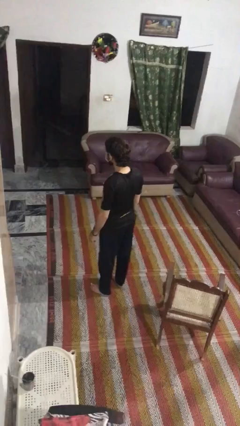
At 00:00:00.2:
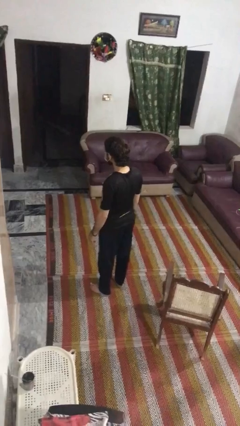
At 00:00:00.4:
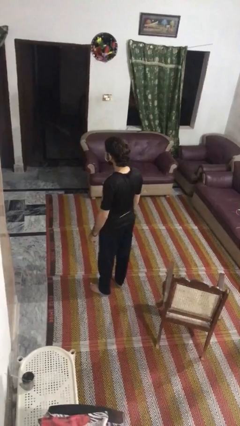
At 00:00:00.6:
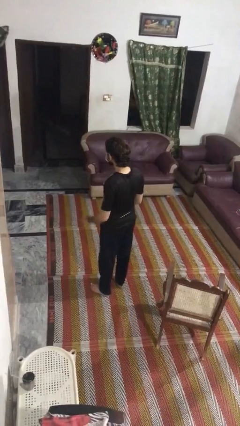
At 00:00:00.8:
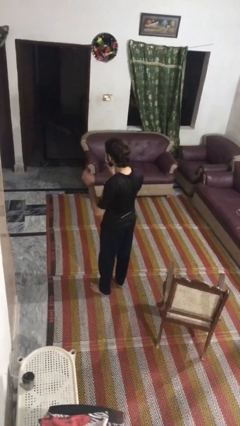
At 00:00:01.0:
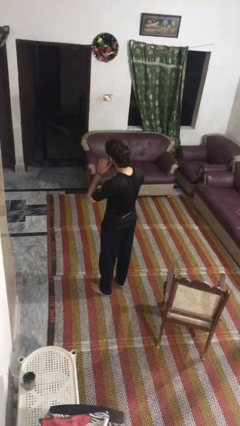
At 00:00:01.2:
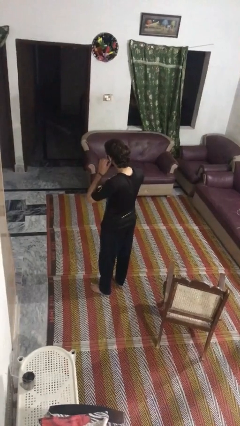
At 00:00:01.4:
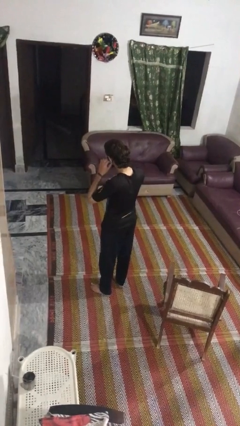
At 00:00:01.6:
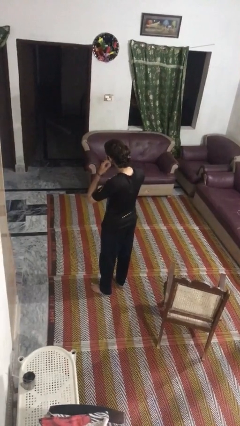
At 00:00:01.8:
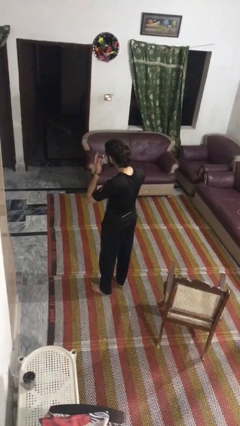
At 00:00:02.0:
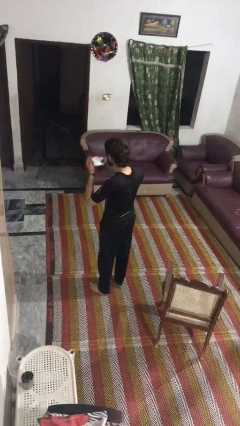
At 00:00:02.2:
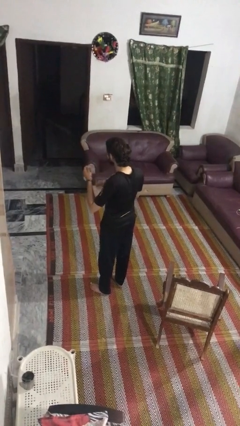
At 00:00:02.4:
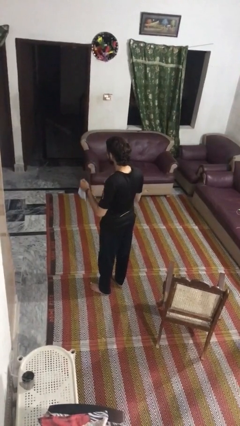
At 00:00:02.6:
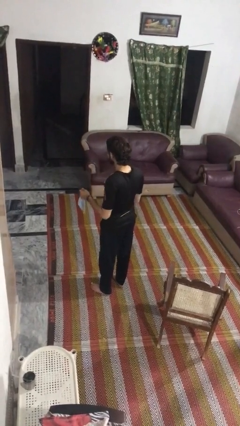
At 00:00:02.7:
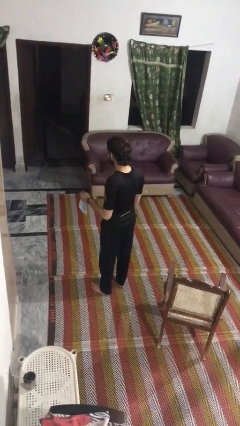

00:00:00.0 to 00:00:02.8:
person takes off facemask

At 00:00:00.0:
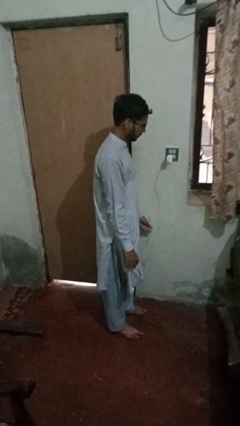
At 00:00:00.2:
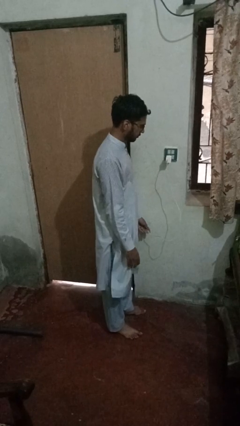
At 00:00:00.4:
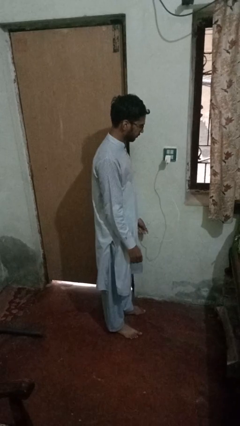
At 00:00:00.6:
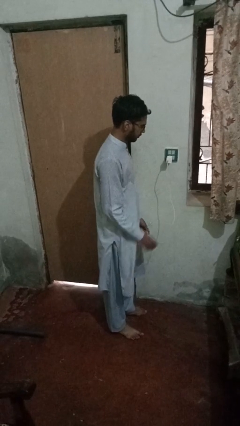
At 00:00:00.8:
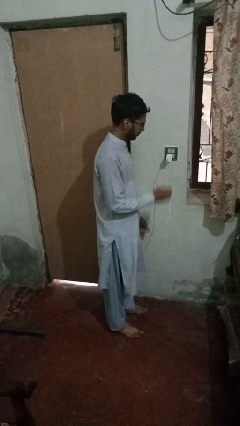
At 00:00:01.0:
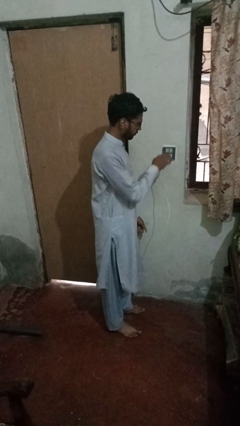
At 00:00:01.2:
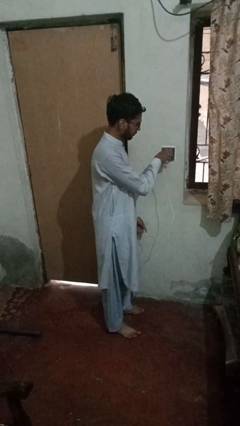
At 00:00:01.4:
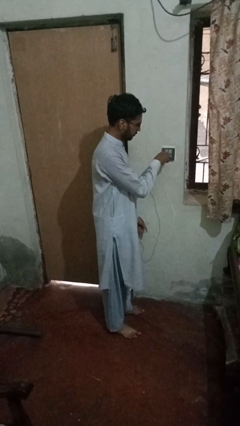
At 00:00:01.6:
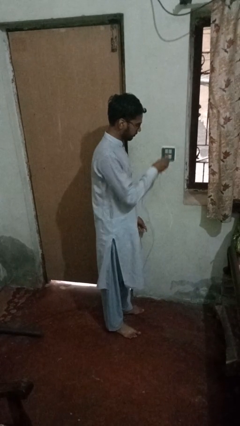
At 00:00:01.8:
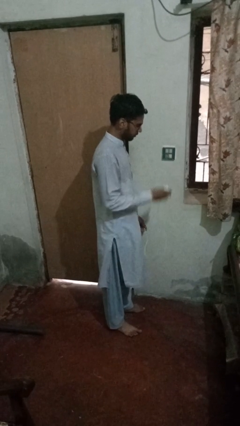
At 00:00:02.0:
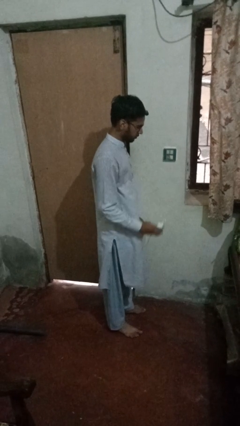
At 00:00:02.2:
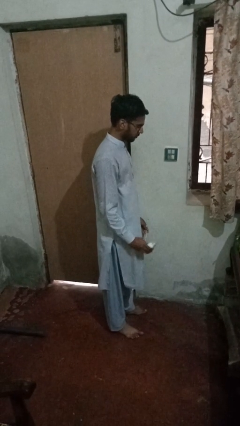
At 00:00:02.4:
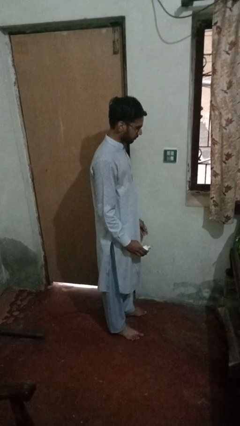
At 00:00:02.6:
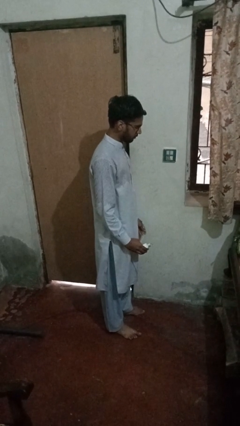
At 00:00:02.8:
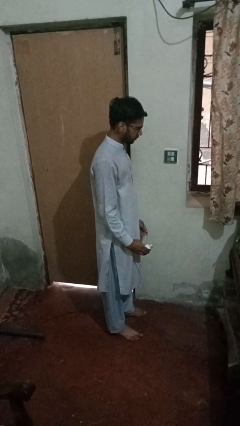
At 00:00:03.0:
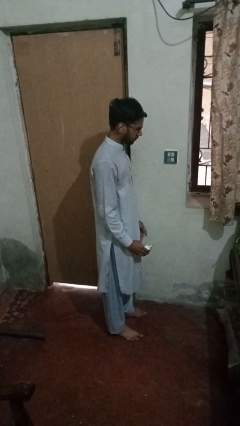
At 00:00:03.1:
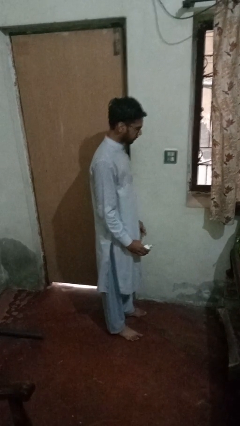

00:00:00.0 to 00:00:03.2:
person unplugs from electrical socket

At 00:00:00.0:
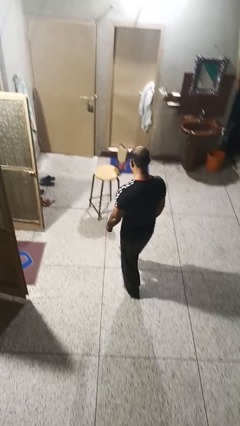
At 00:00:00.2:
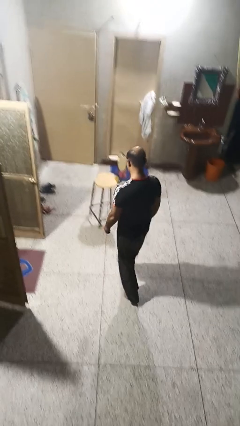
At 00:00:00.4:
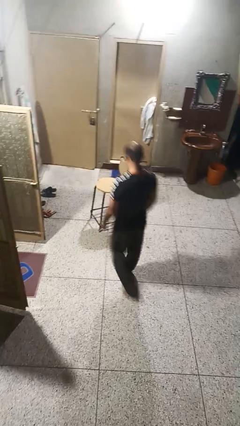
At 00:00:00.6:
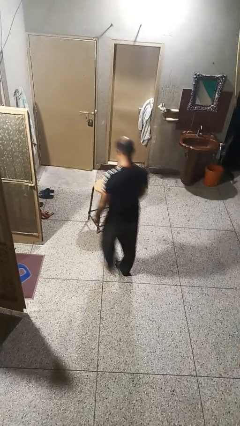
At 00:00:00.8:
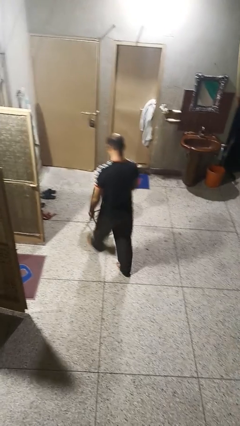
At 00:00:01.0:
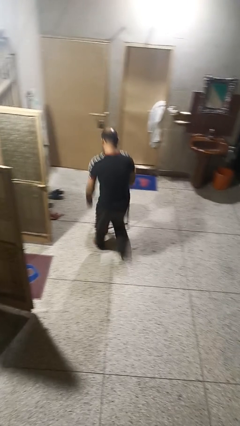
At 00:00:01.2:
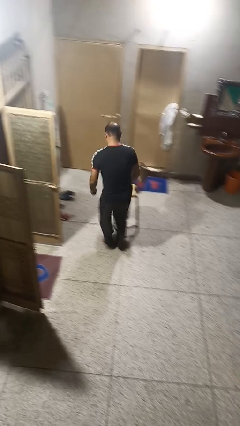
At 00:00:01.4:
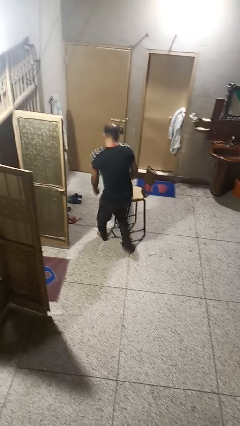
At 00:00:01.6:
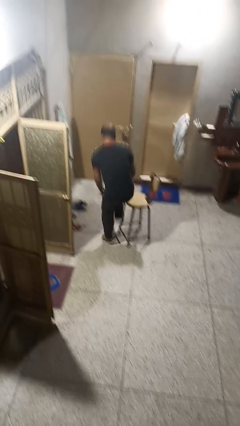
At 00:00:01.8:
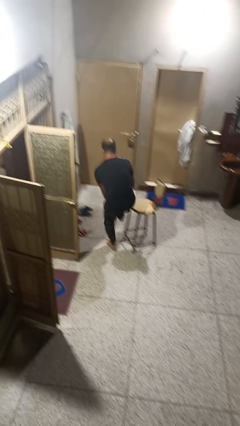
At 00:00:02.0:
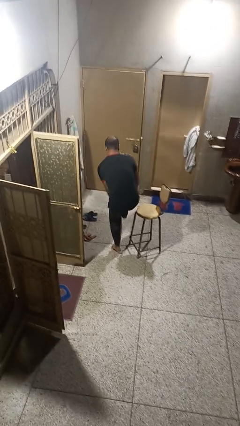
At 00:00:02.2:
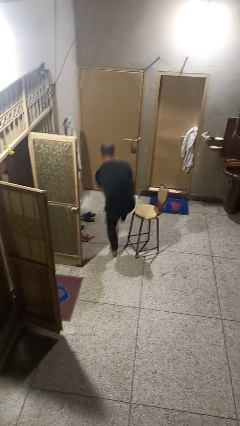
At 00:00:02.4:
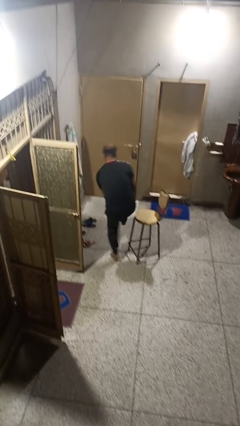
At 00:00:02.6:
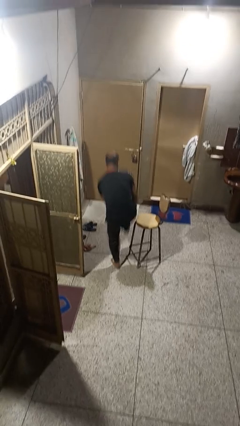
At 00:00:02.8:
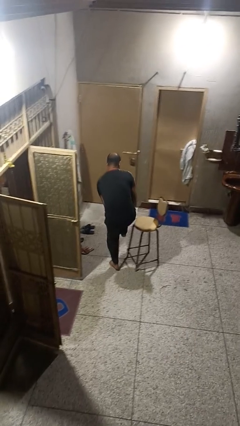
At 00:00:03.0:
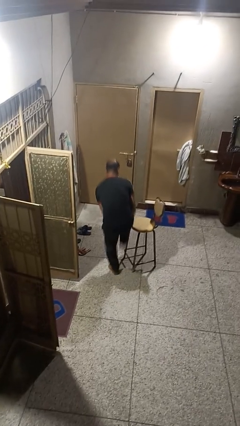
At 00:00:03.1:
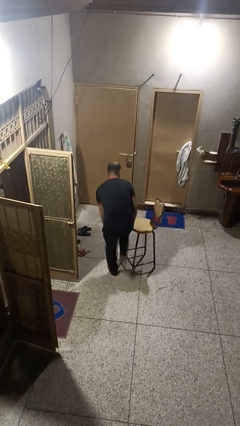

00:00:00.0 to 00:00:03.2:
person stubs toe

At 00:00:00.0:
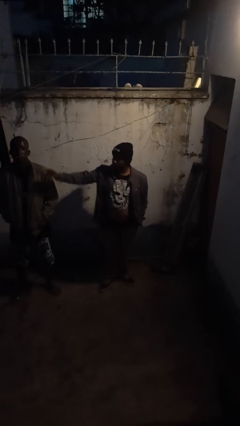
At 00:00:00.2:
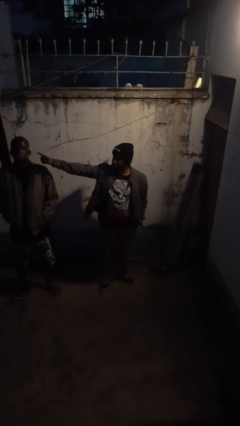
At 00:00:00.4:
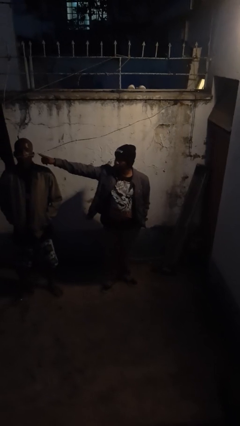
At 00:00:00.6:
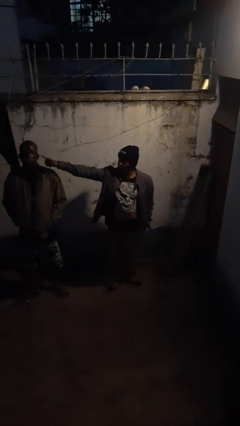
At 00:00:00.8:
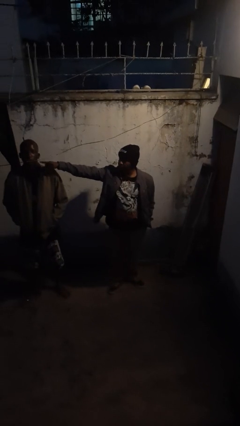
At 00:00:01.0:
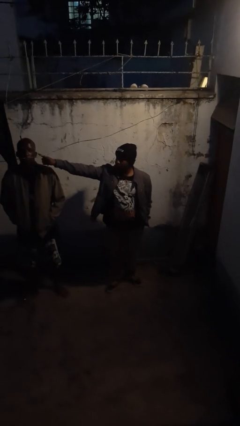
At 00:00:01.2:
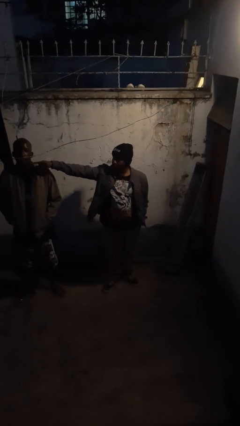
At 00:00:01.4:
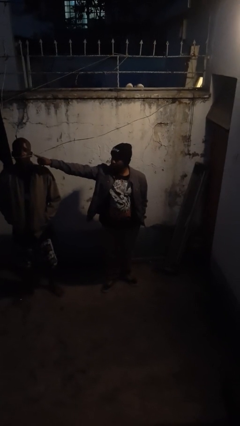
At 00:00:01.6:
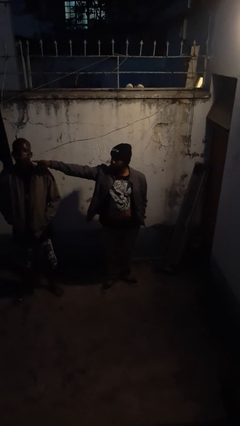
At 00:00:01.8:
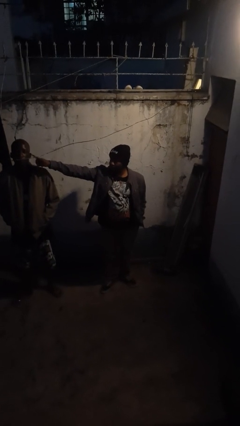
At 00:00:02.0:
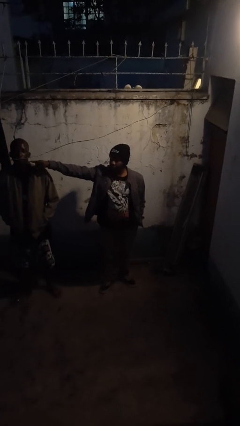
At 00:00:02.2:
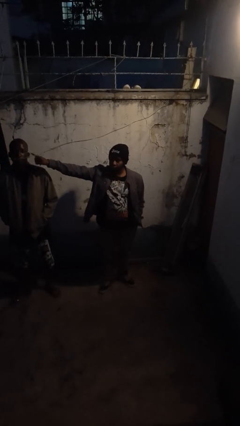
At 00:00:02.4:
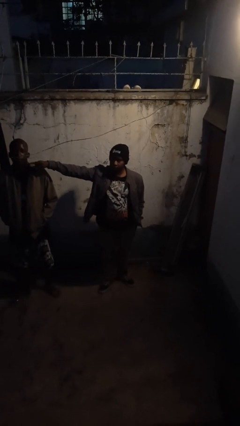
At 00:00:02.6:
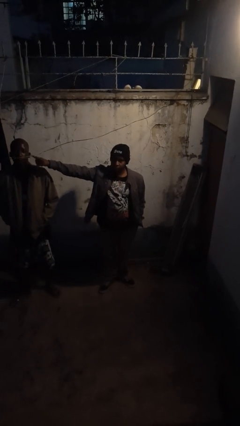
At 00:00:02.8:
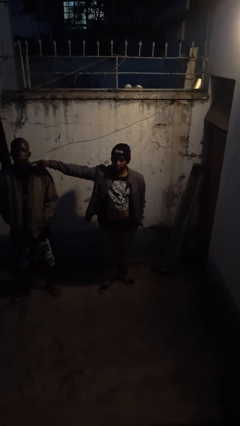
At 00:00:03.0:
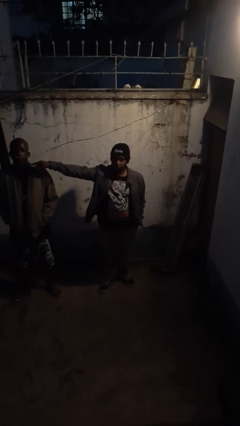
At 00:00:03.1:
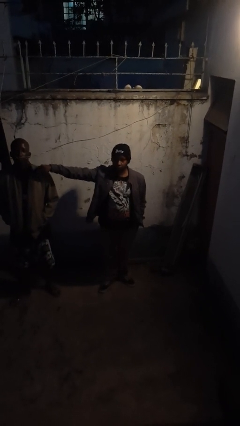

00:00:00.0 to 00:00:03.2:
person touches face of person

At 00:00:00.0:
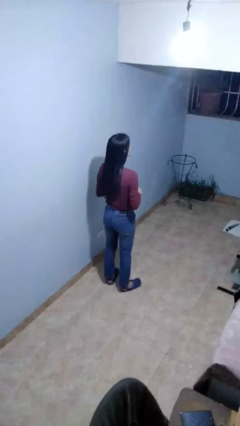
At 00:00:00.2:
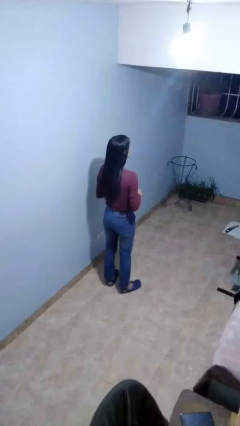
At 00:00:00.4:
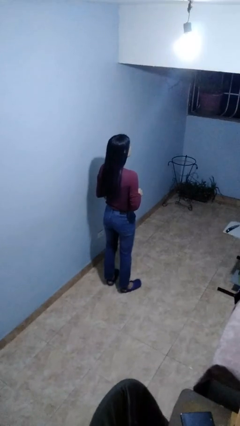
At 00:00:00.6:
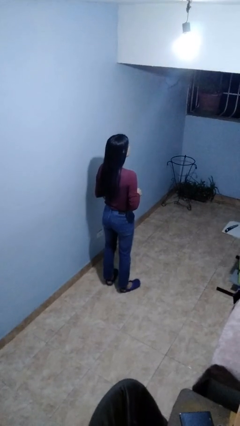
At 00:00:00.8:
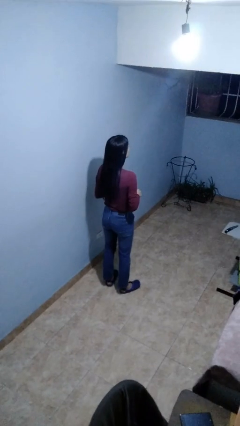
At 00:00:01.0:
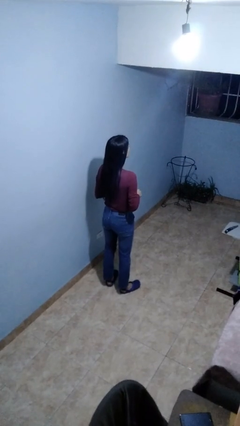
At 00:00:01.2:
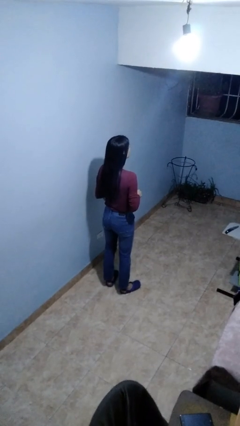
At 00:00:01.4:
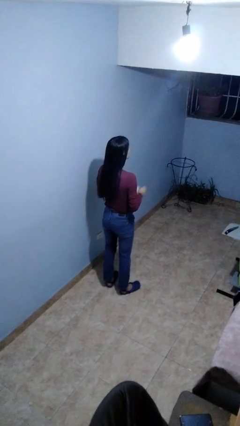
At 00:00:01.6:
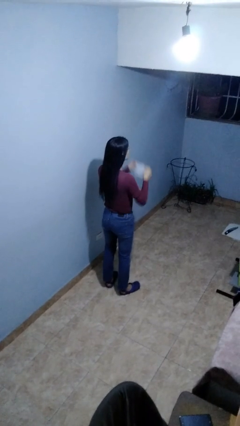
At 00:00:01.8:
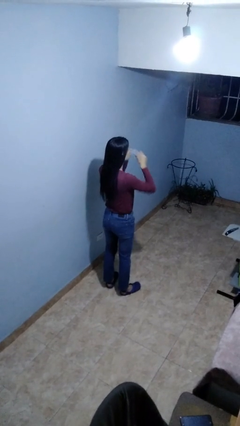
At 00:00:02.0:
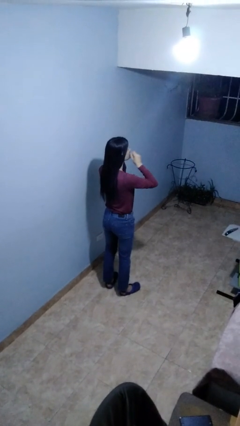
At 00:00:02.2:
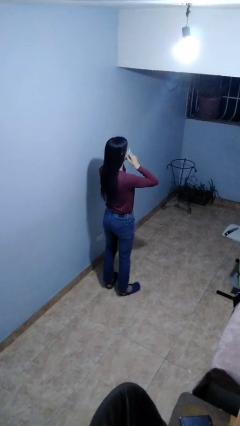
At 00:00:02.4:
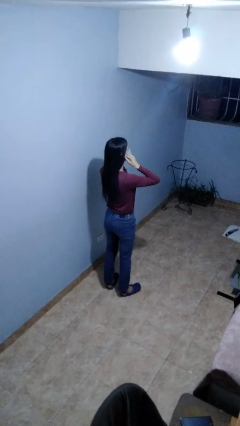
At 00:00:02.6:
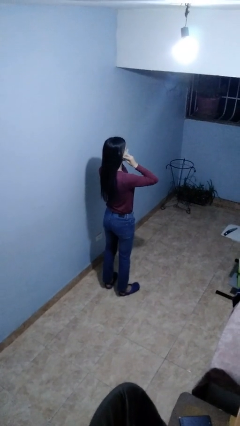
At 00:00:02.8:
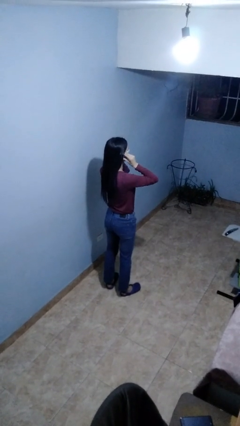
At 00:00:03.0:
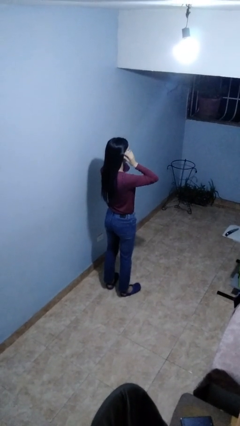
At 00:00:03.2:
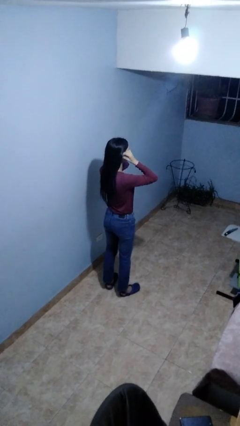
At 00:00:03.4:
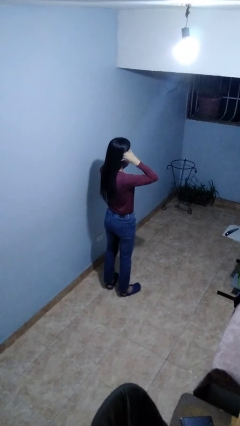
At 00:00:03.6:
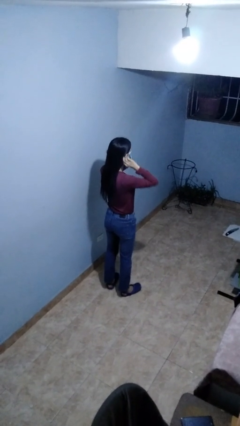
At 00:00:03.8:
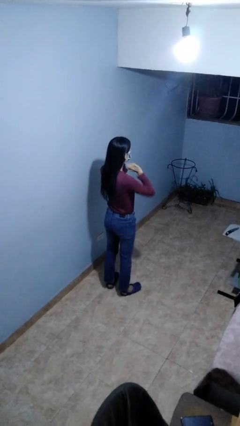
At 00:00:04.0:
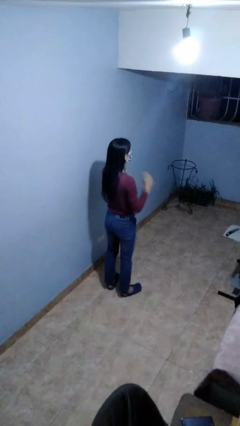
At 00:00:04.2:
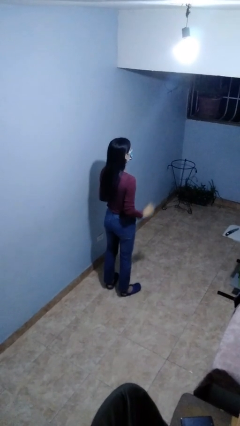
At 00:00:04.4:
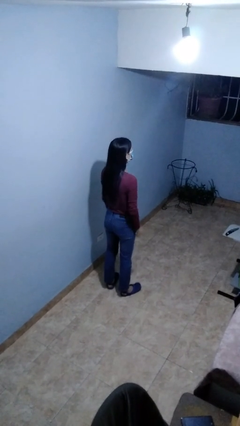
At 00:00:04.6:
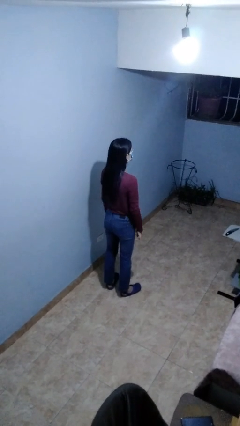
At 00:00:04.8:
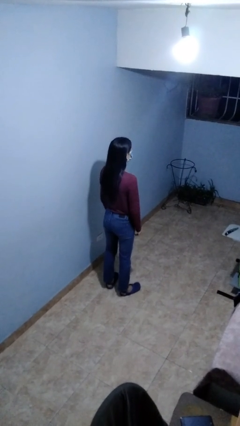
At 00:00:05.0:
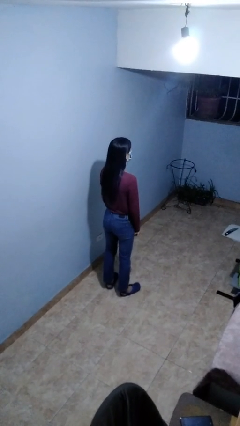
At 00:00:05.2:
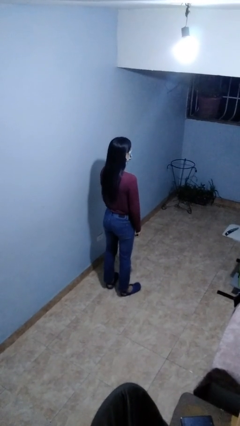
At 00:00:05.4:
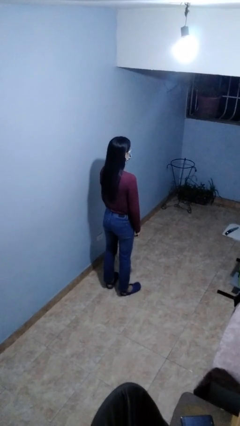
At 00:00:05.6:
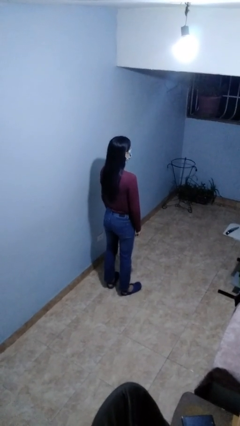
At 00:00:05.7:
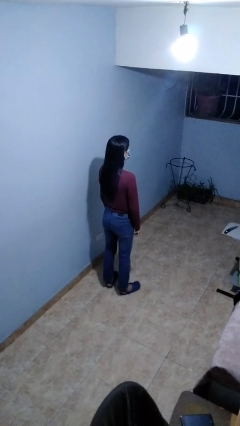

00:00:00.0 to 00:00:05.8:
person puts on facemask
